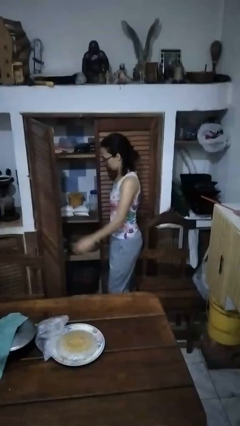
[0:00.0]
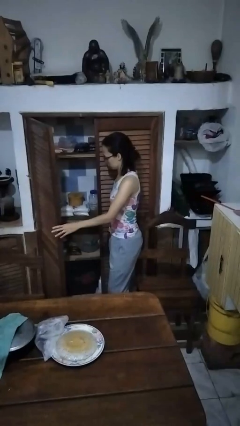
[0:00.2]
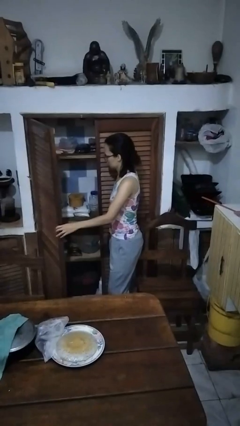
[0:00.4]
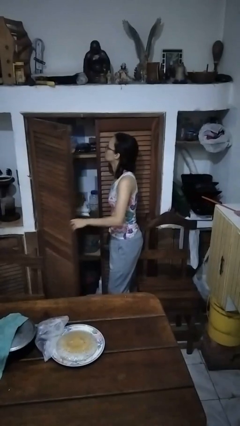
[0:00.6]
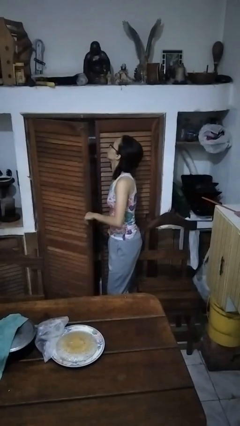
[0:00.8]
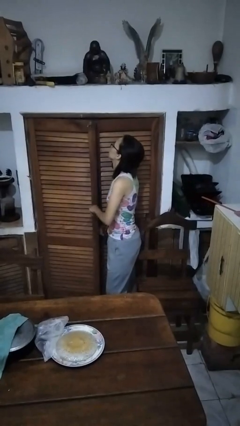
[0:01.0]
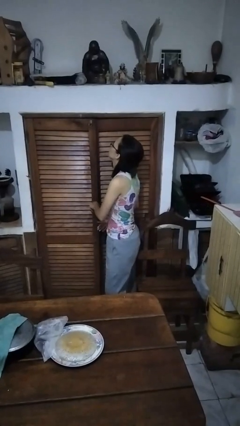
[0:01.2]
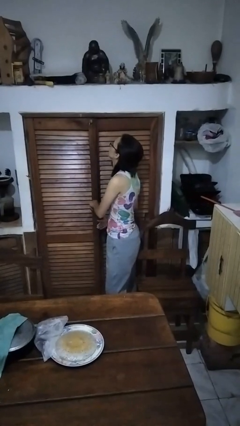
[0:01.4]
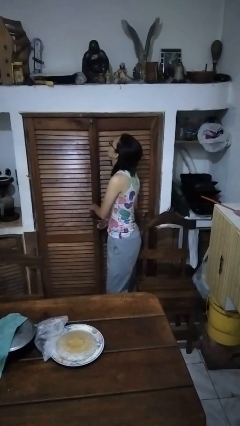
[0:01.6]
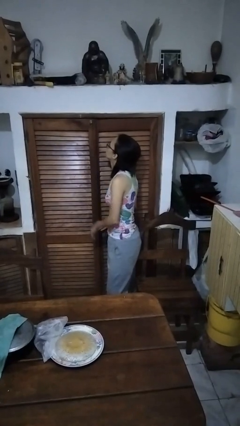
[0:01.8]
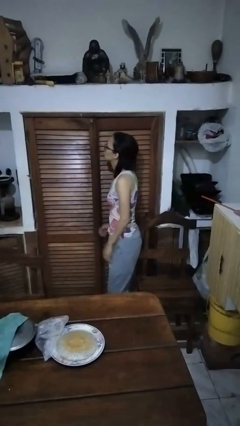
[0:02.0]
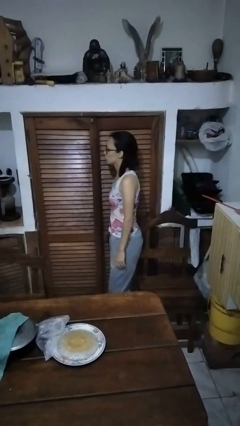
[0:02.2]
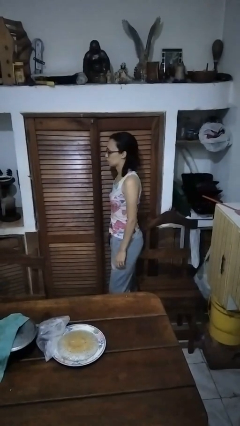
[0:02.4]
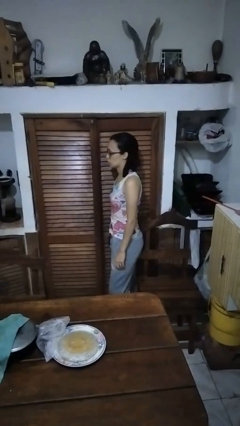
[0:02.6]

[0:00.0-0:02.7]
person closes cabinet

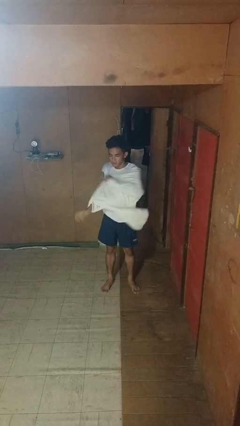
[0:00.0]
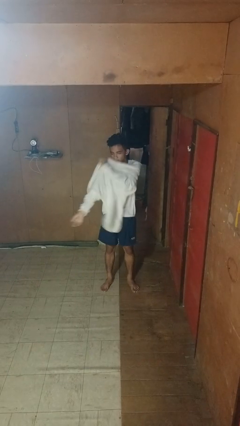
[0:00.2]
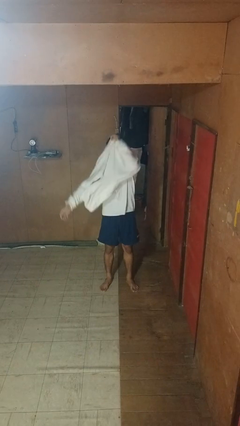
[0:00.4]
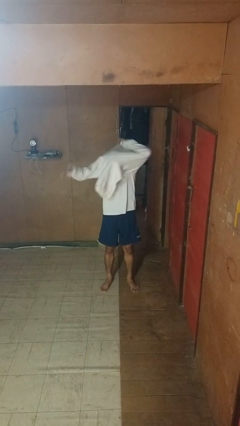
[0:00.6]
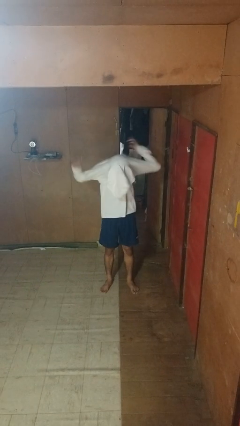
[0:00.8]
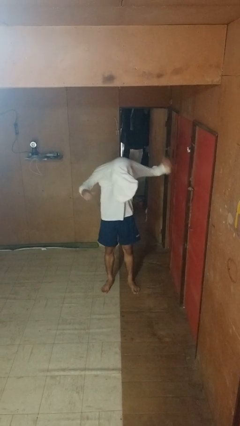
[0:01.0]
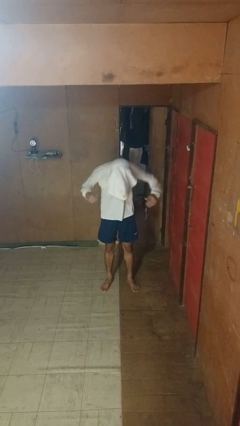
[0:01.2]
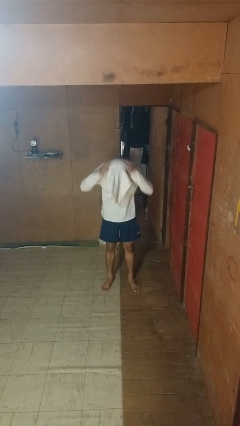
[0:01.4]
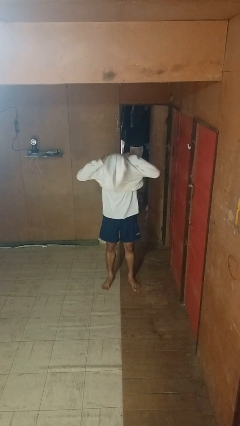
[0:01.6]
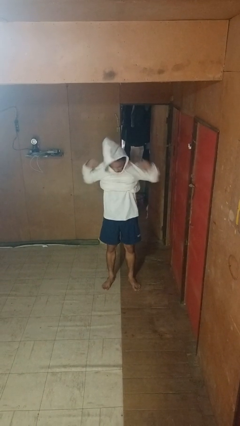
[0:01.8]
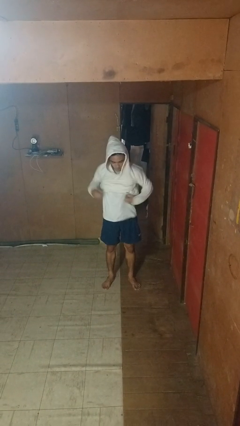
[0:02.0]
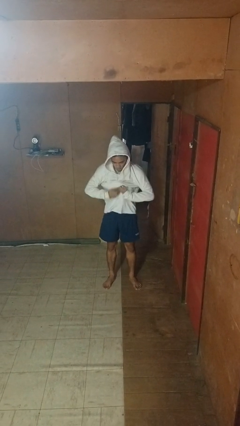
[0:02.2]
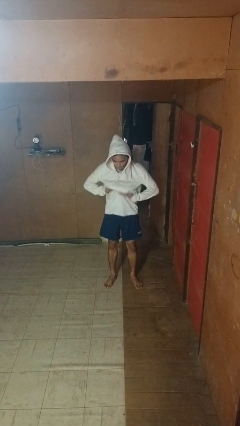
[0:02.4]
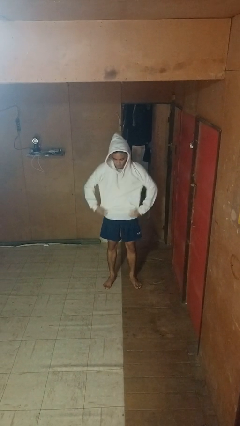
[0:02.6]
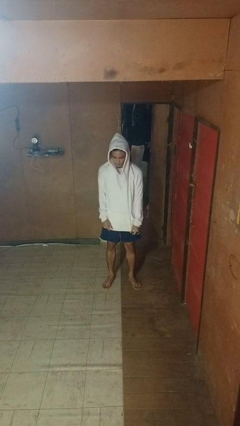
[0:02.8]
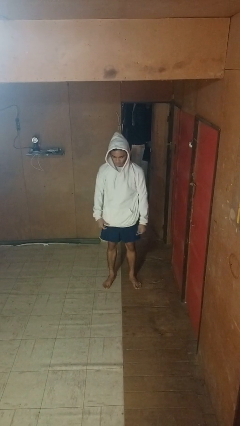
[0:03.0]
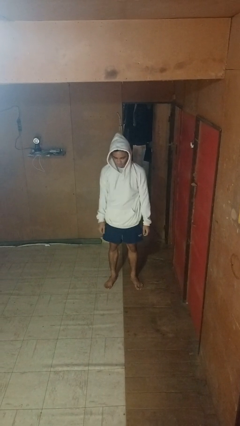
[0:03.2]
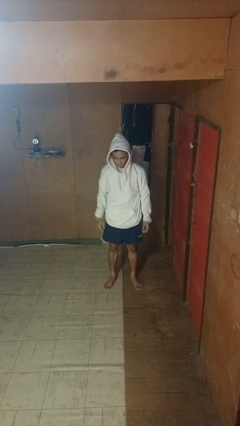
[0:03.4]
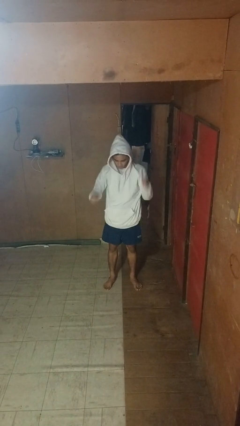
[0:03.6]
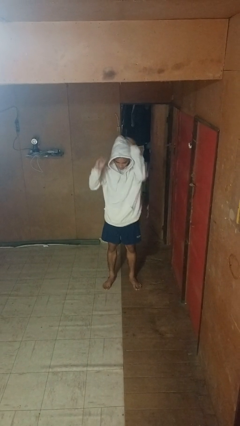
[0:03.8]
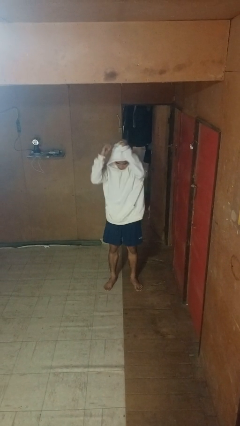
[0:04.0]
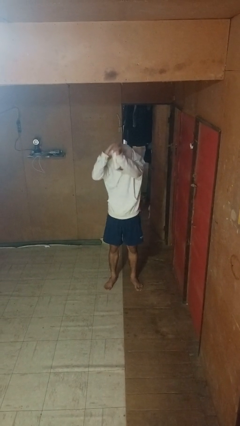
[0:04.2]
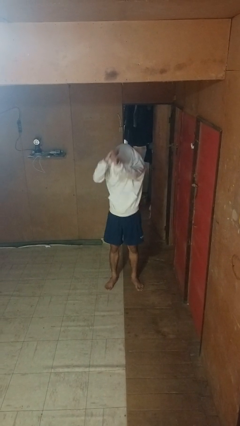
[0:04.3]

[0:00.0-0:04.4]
person puts on hoodie

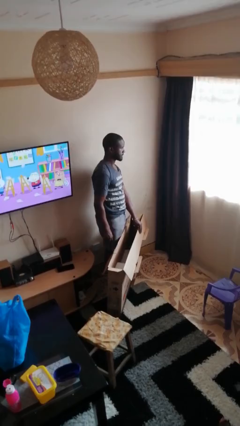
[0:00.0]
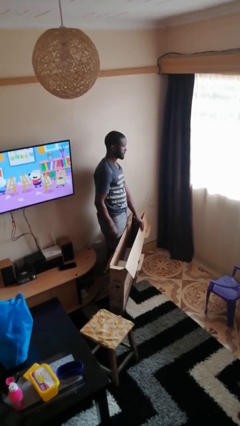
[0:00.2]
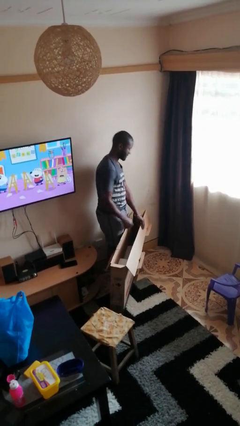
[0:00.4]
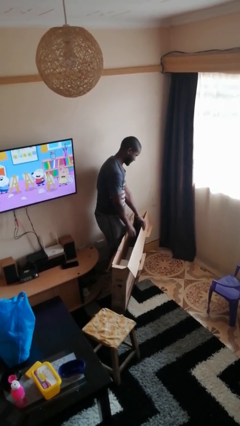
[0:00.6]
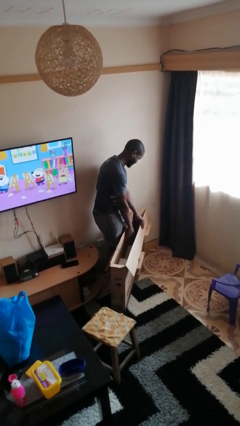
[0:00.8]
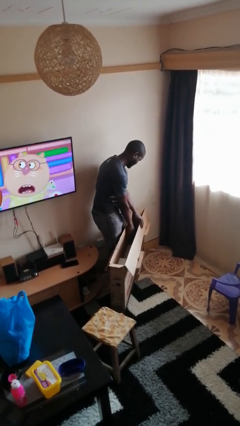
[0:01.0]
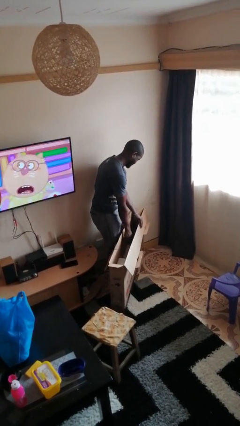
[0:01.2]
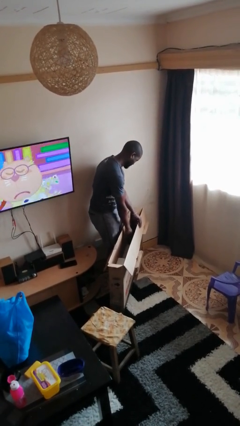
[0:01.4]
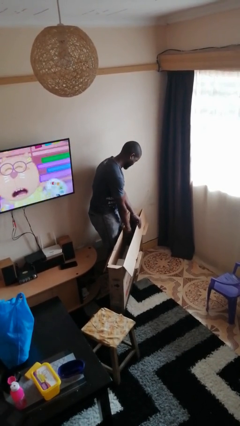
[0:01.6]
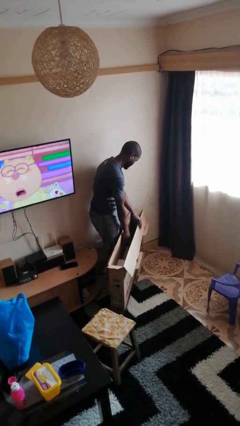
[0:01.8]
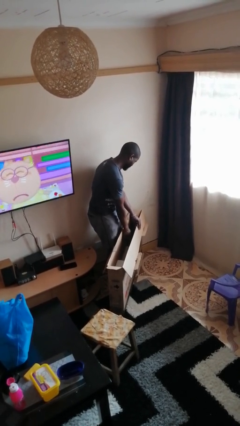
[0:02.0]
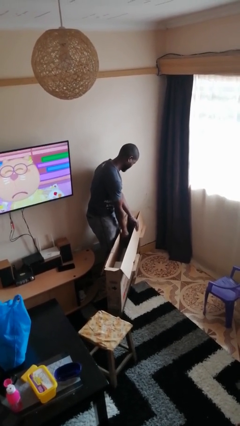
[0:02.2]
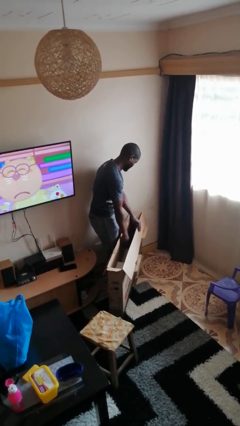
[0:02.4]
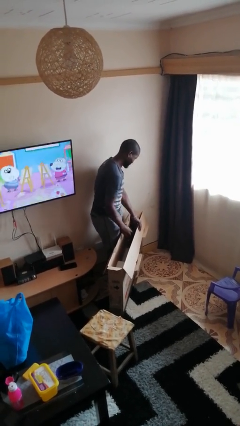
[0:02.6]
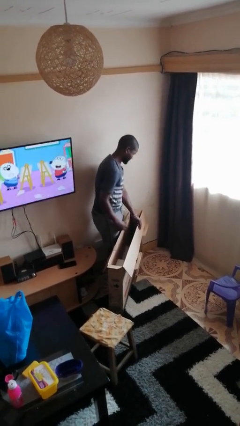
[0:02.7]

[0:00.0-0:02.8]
person searches in box

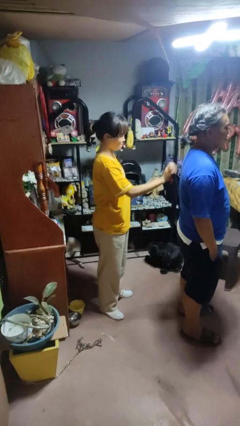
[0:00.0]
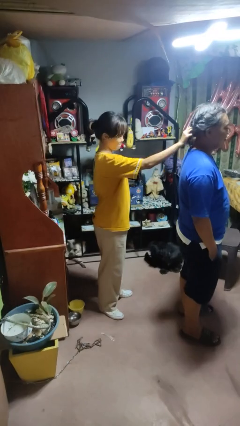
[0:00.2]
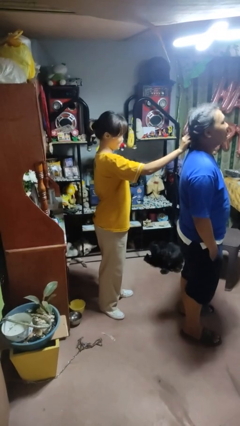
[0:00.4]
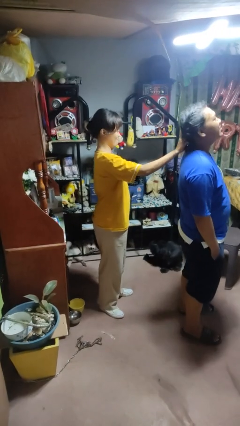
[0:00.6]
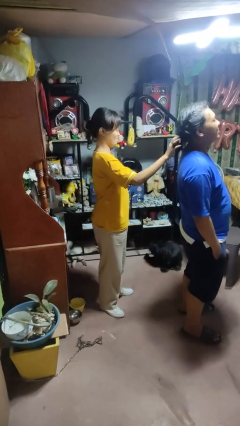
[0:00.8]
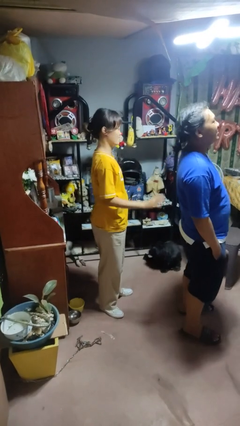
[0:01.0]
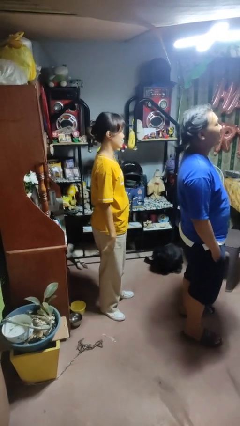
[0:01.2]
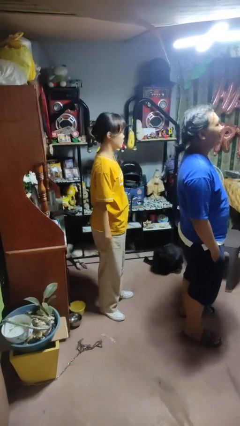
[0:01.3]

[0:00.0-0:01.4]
person grabs person by hair

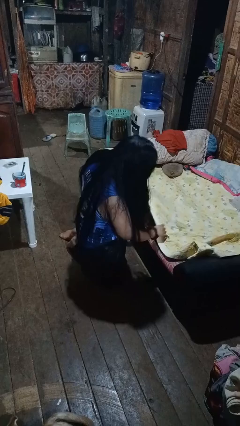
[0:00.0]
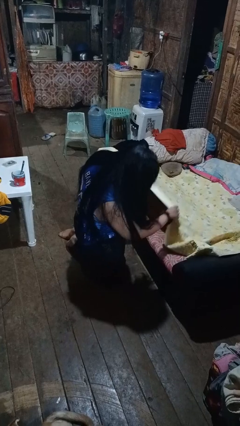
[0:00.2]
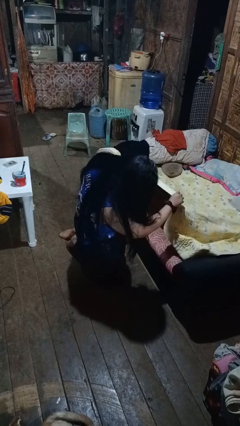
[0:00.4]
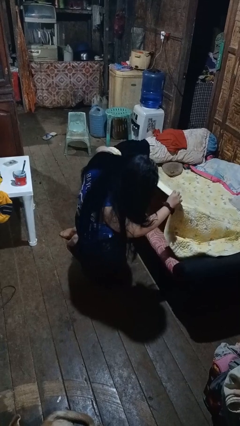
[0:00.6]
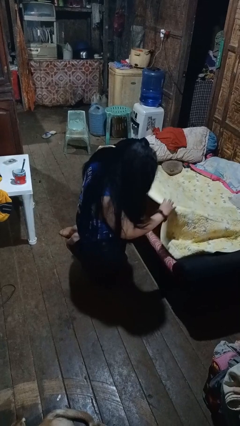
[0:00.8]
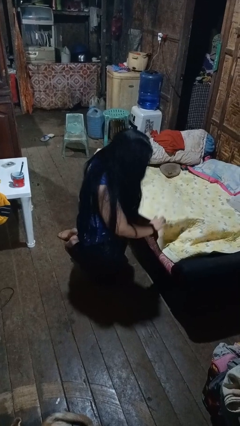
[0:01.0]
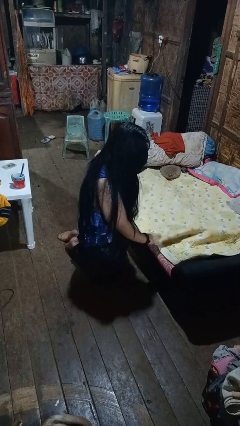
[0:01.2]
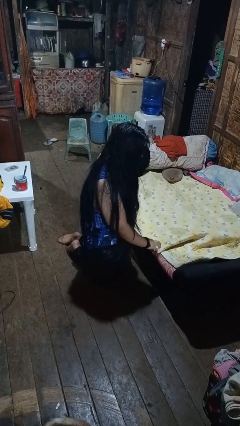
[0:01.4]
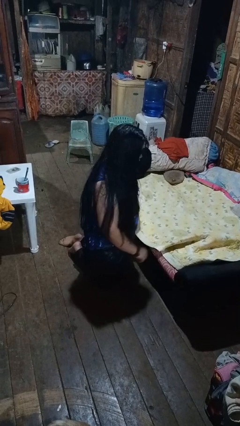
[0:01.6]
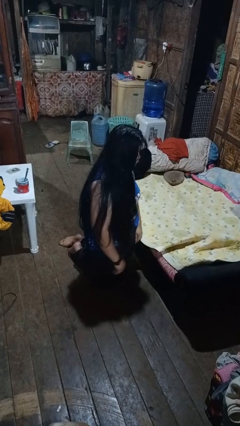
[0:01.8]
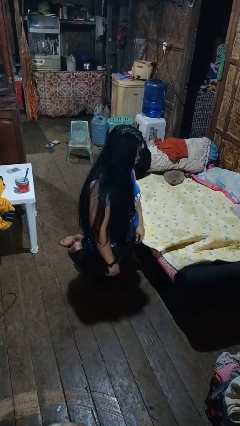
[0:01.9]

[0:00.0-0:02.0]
person searches under bed

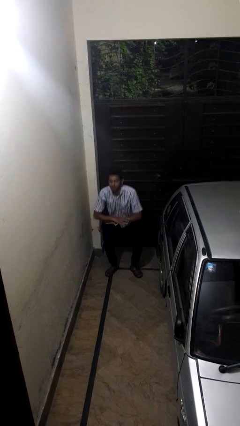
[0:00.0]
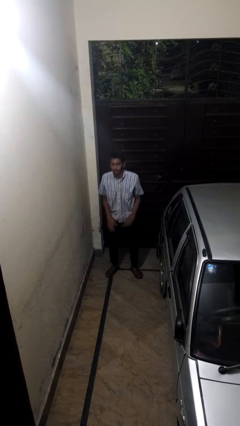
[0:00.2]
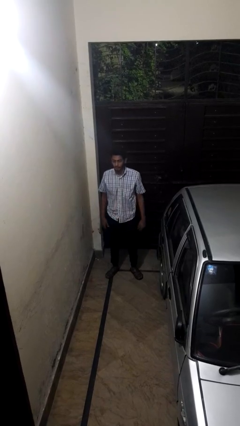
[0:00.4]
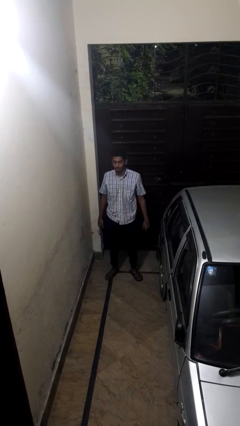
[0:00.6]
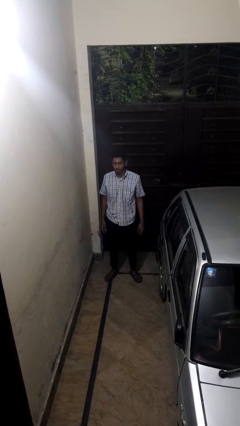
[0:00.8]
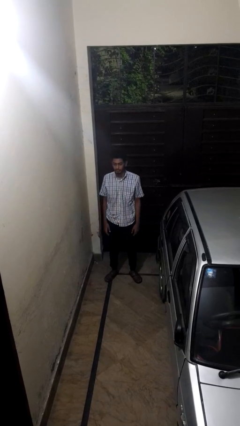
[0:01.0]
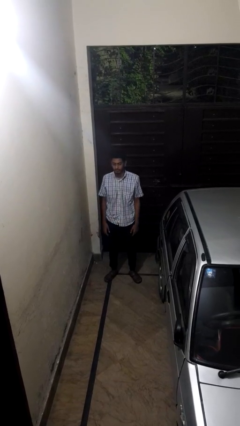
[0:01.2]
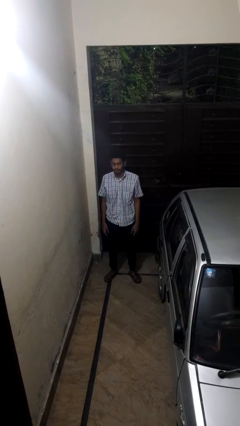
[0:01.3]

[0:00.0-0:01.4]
person stands up

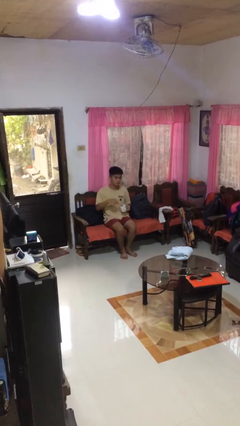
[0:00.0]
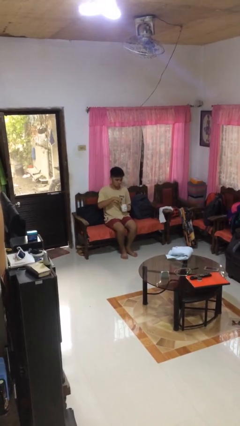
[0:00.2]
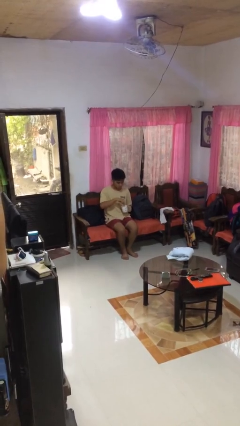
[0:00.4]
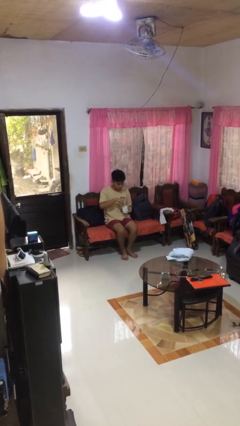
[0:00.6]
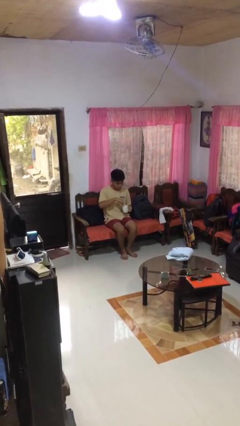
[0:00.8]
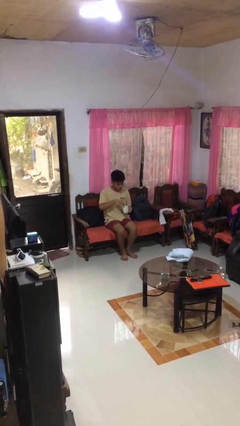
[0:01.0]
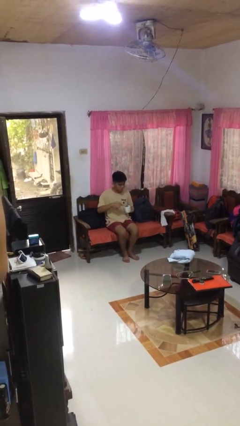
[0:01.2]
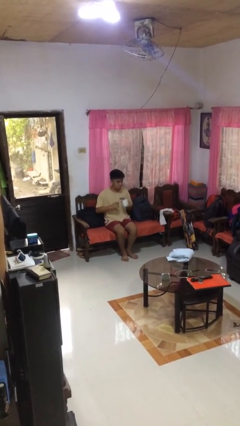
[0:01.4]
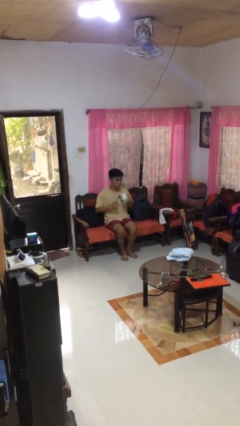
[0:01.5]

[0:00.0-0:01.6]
person stirs mug

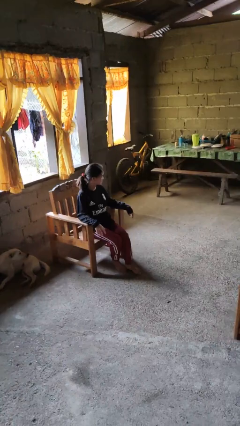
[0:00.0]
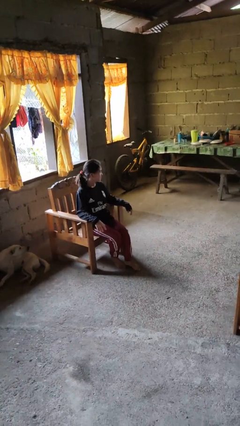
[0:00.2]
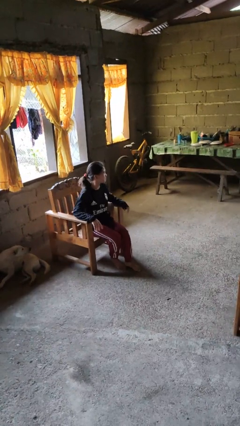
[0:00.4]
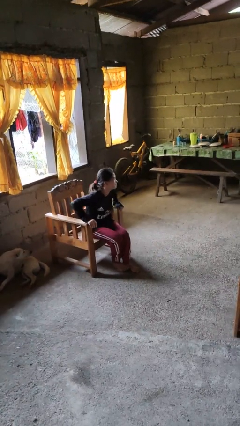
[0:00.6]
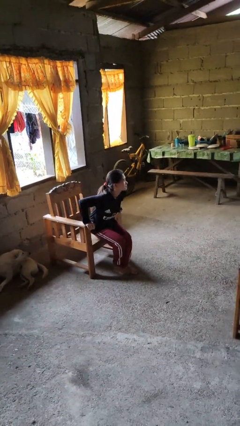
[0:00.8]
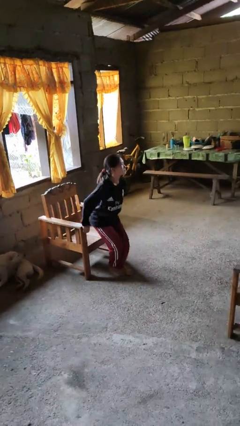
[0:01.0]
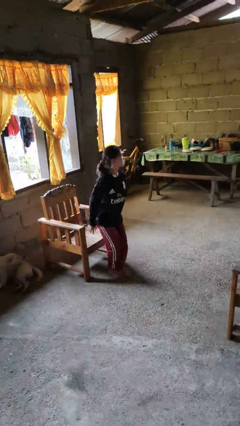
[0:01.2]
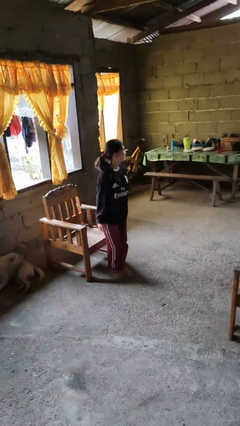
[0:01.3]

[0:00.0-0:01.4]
person stands up from floor
